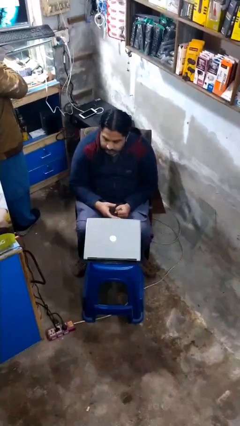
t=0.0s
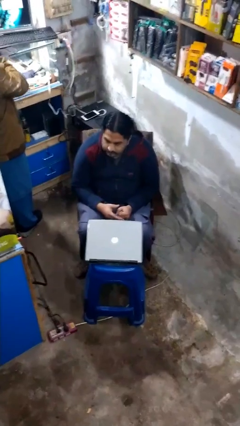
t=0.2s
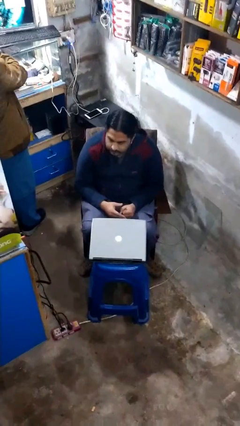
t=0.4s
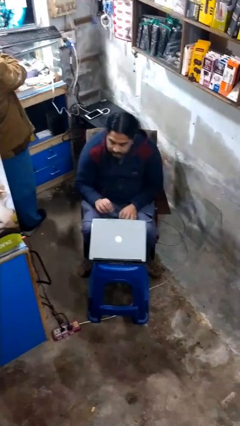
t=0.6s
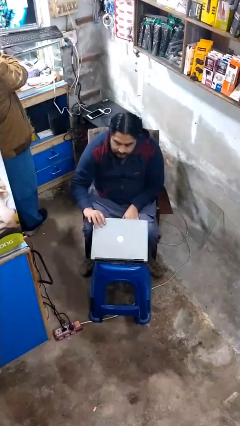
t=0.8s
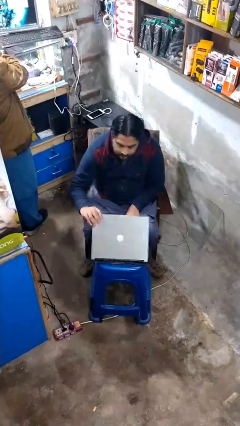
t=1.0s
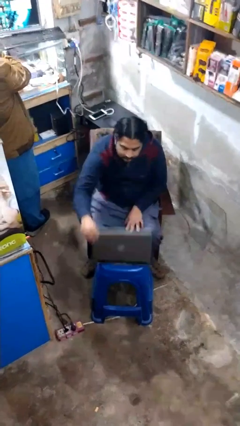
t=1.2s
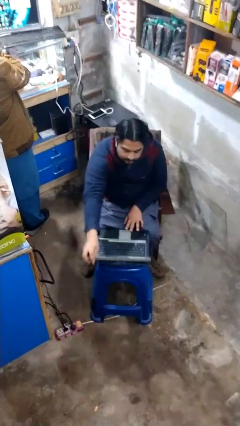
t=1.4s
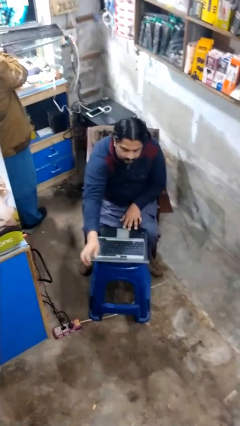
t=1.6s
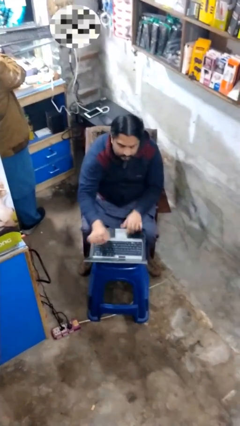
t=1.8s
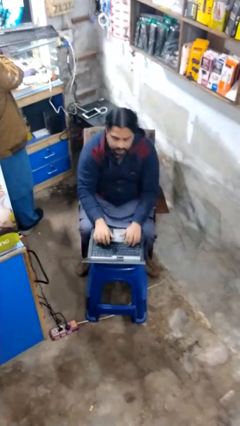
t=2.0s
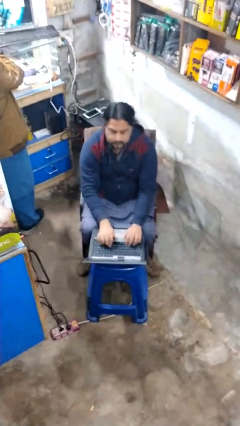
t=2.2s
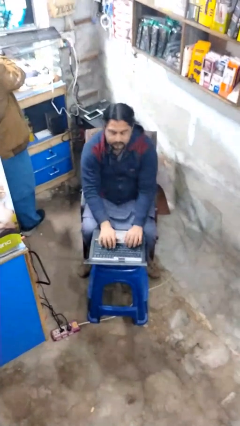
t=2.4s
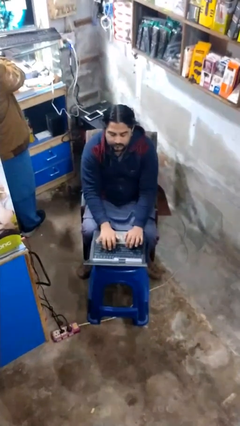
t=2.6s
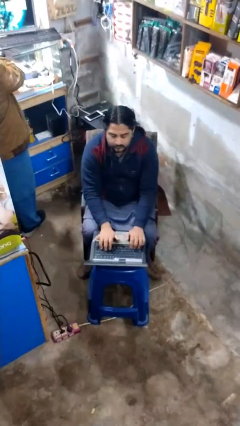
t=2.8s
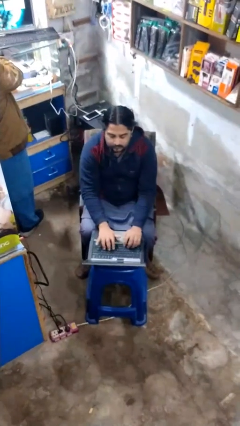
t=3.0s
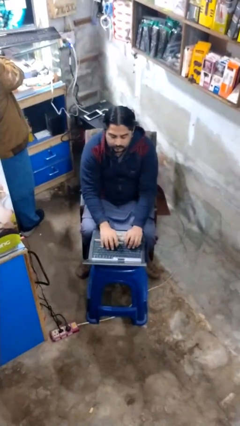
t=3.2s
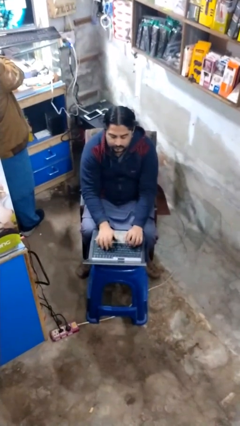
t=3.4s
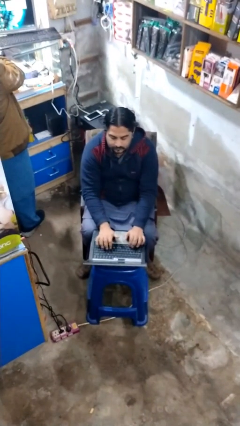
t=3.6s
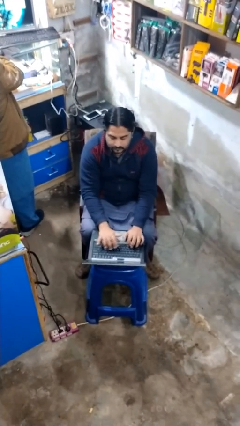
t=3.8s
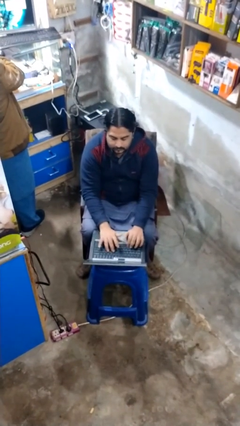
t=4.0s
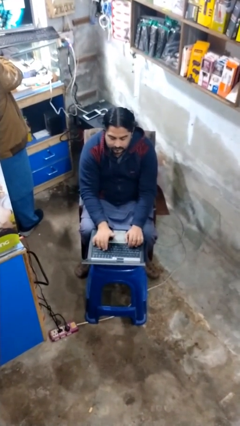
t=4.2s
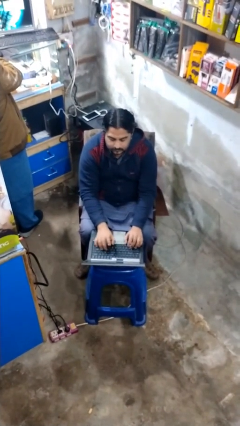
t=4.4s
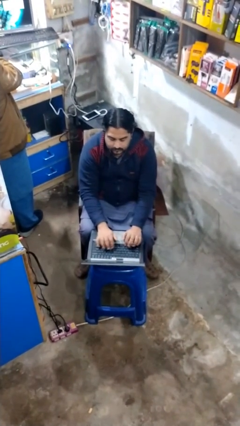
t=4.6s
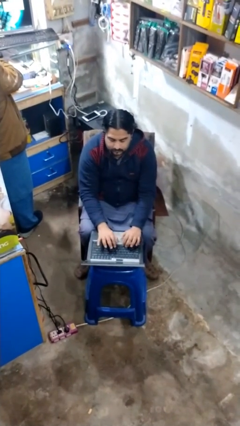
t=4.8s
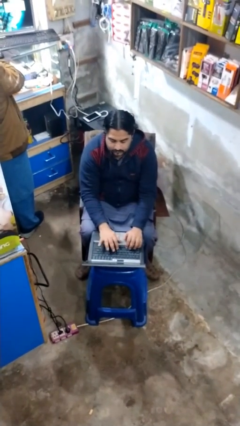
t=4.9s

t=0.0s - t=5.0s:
person interacts with laptop

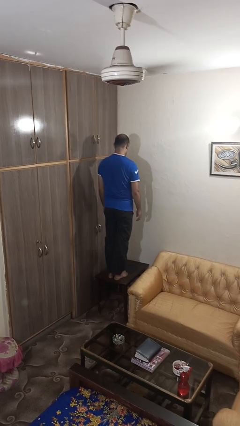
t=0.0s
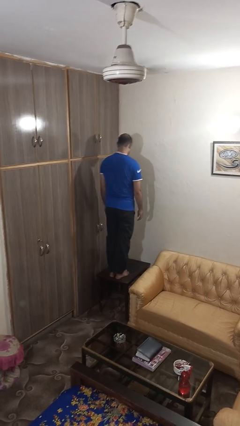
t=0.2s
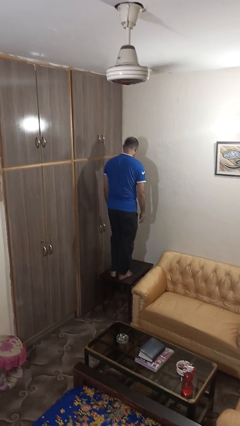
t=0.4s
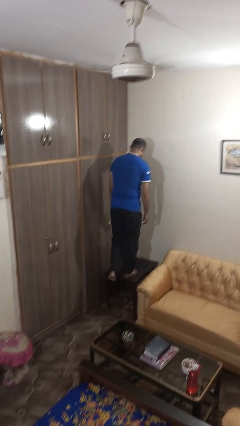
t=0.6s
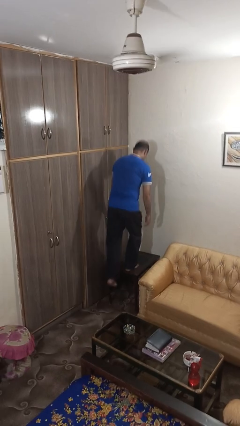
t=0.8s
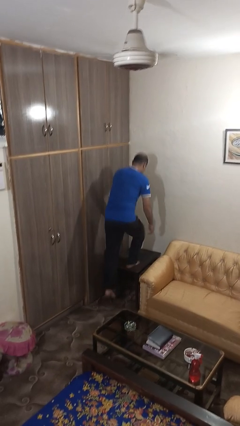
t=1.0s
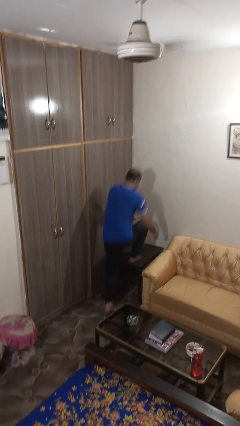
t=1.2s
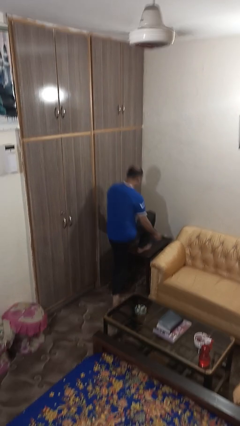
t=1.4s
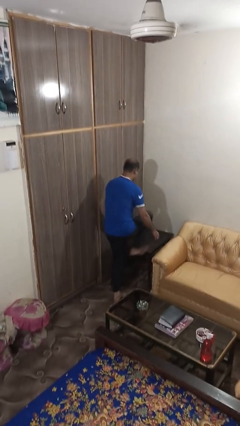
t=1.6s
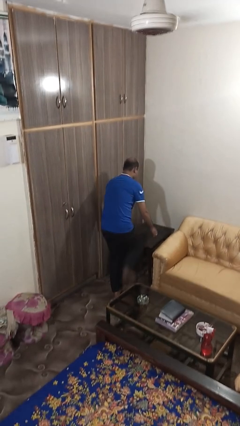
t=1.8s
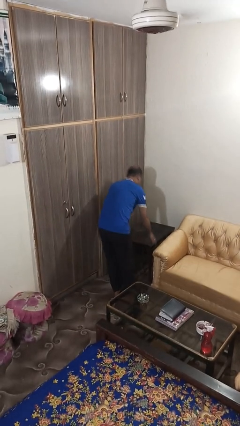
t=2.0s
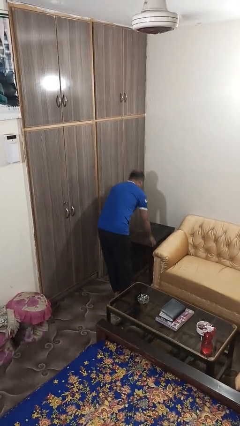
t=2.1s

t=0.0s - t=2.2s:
person climbs off table

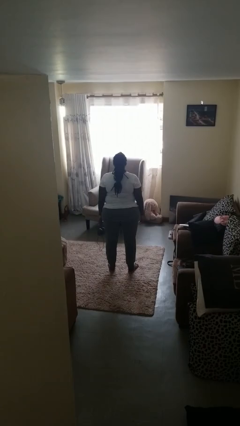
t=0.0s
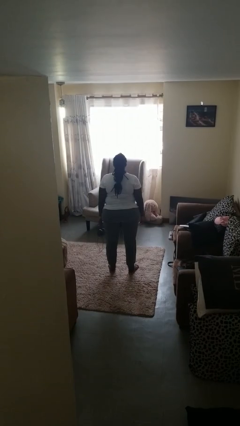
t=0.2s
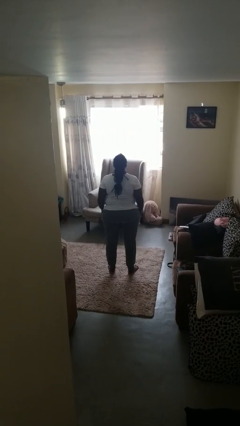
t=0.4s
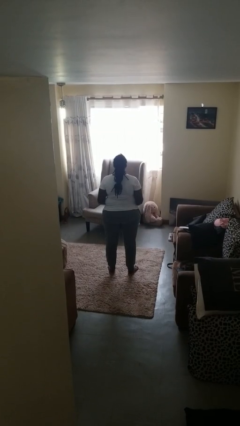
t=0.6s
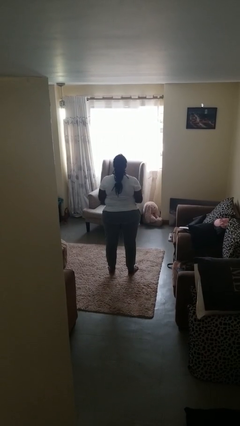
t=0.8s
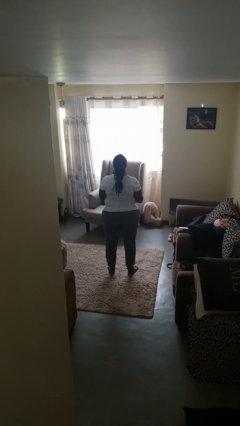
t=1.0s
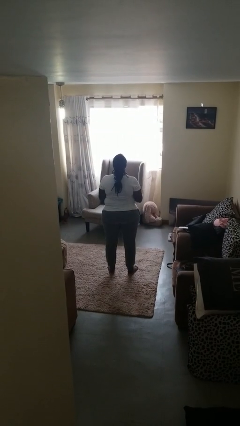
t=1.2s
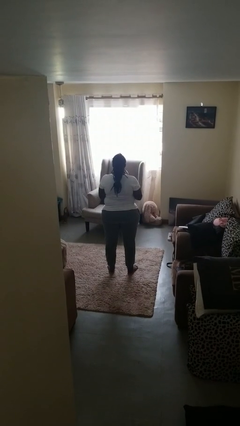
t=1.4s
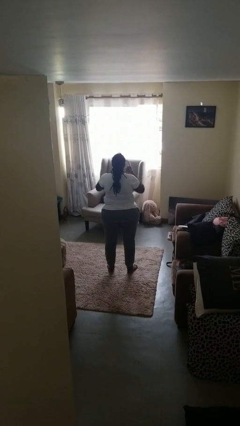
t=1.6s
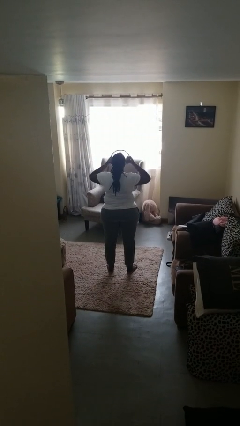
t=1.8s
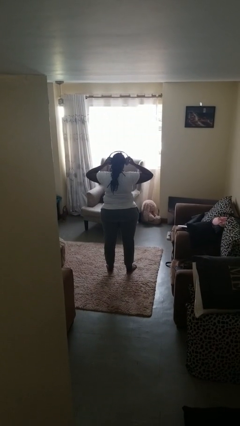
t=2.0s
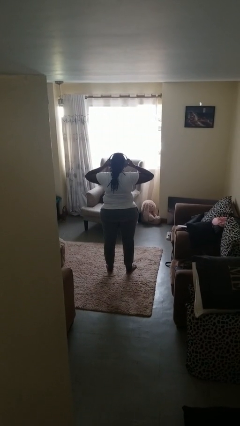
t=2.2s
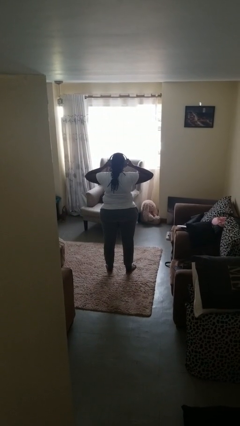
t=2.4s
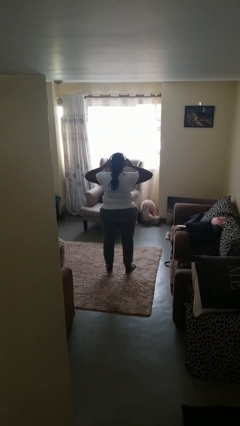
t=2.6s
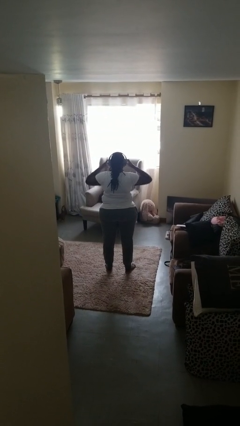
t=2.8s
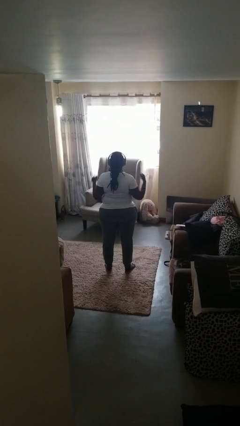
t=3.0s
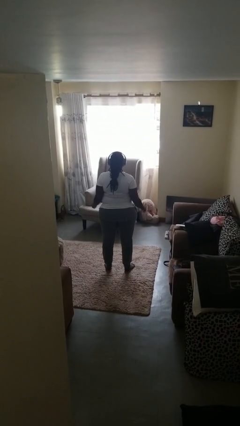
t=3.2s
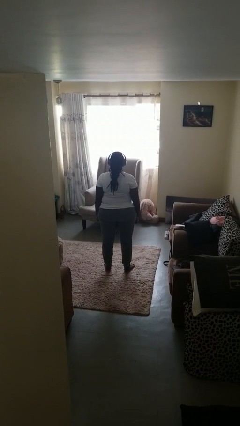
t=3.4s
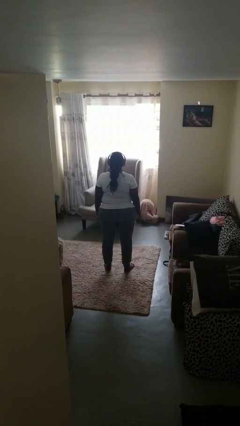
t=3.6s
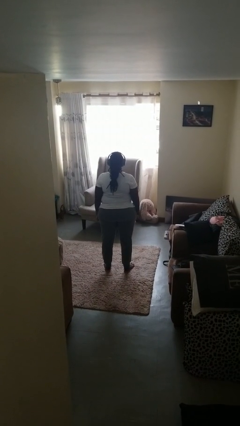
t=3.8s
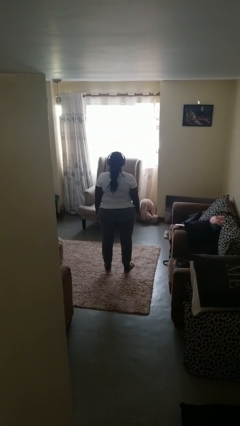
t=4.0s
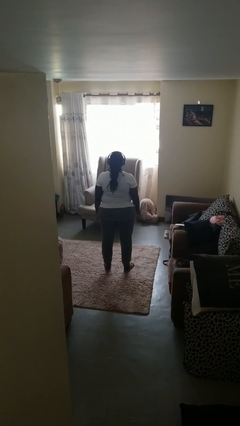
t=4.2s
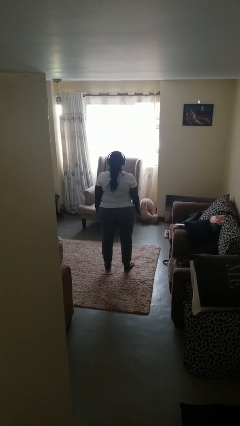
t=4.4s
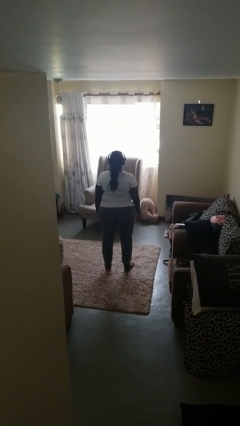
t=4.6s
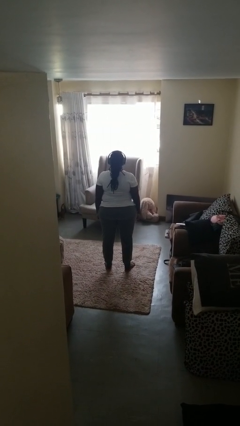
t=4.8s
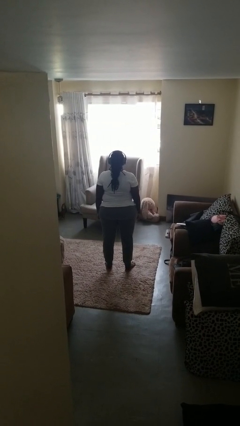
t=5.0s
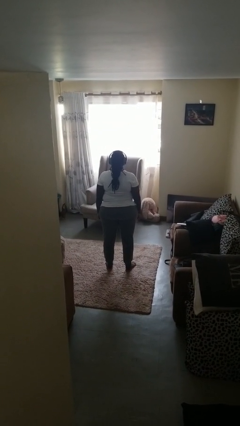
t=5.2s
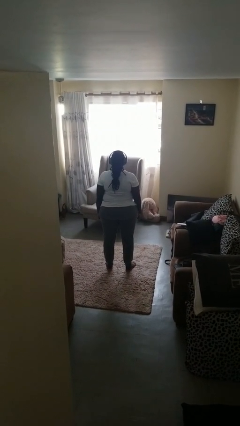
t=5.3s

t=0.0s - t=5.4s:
person puts on headphones

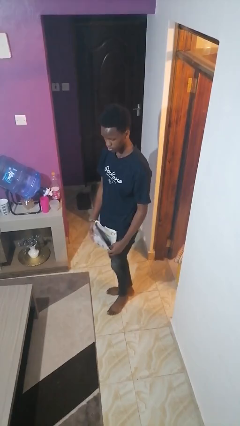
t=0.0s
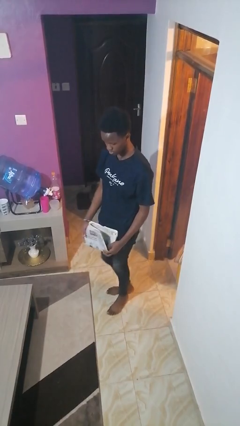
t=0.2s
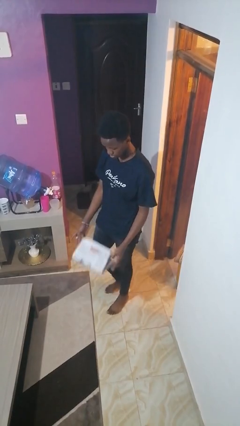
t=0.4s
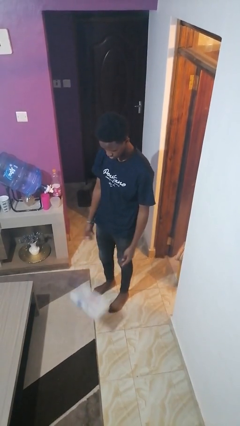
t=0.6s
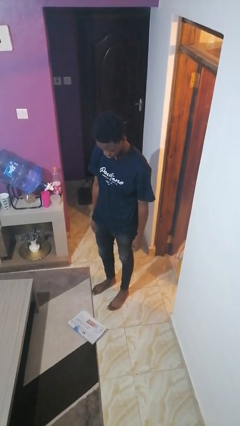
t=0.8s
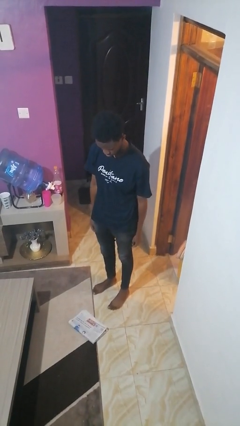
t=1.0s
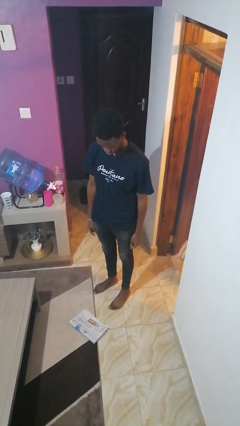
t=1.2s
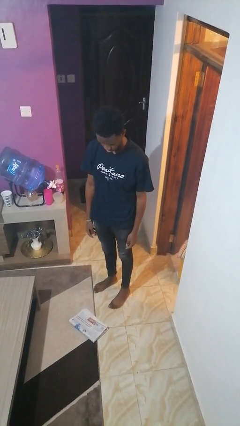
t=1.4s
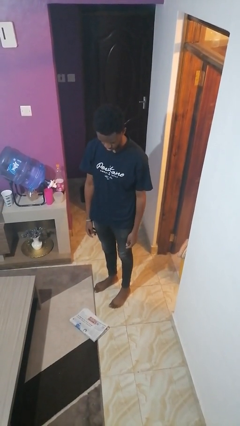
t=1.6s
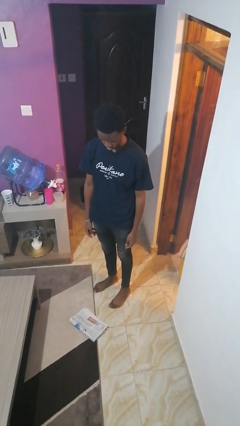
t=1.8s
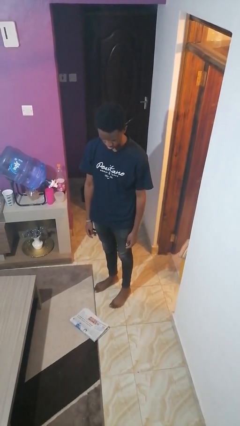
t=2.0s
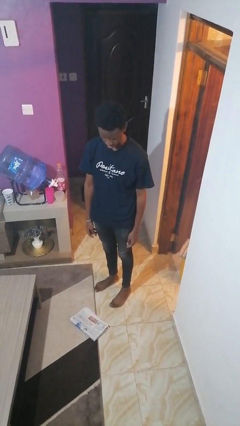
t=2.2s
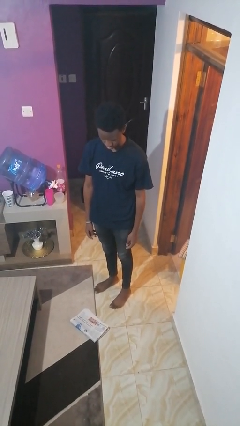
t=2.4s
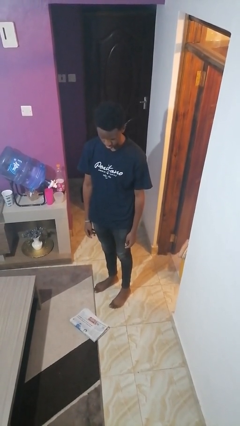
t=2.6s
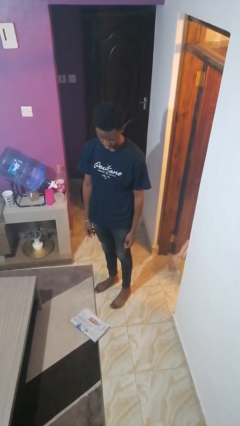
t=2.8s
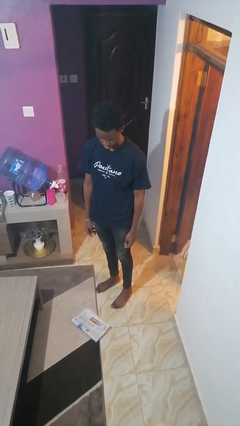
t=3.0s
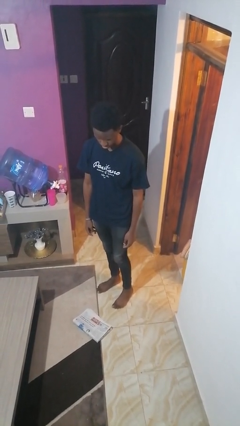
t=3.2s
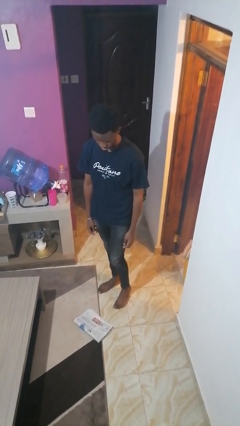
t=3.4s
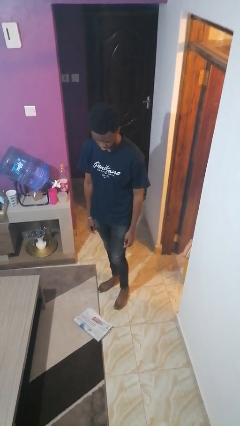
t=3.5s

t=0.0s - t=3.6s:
person drops object

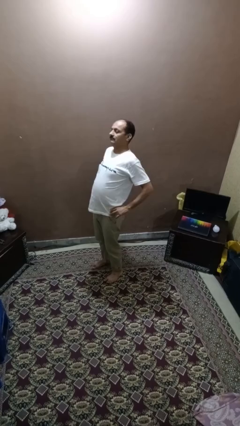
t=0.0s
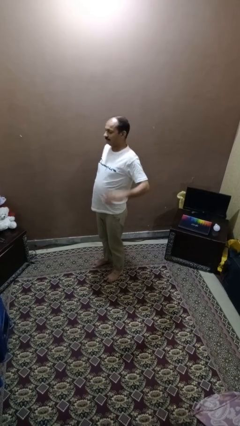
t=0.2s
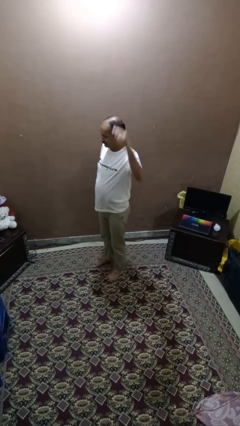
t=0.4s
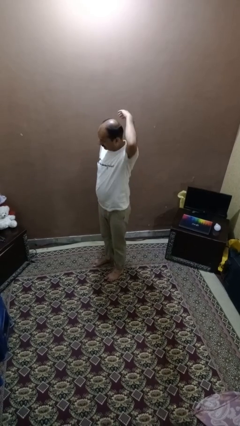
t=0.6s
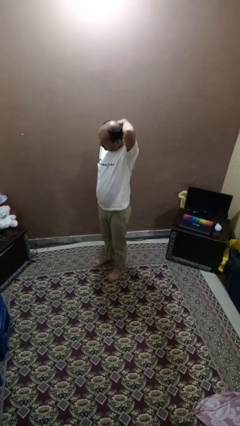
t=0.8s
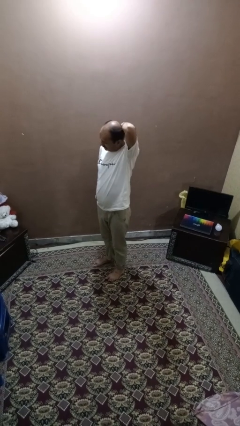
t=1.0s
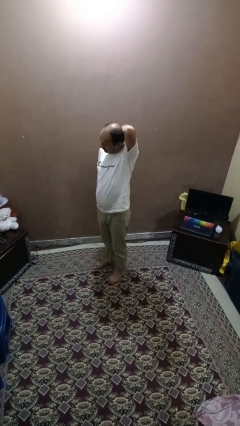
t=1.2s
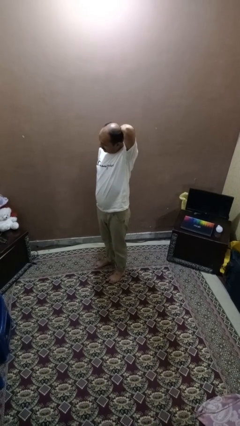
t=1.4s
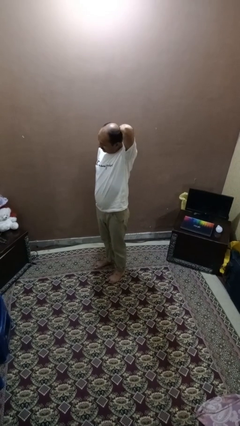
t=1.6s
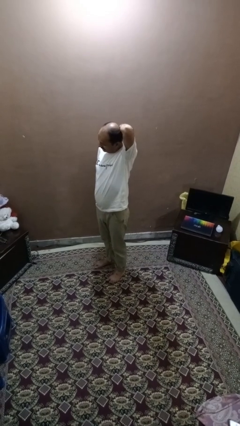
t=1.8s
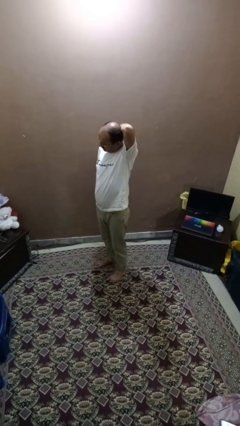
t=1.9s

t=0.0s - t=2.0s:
person stretches arms to side
